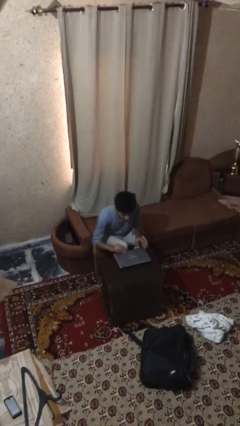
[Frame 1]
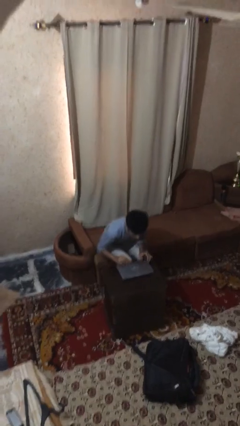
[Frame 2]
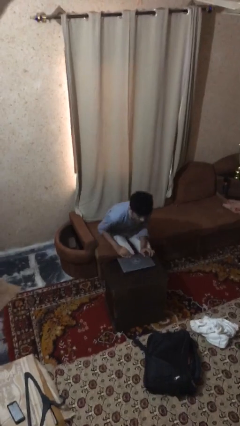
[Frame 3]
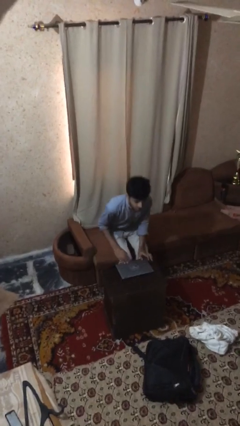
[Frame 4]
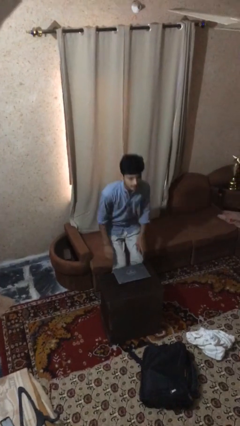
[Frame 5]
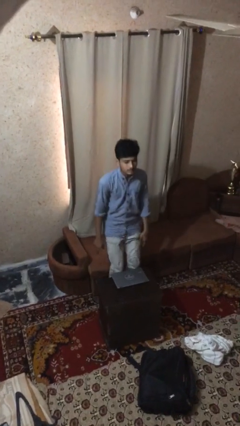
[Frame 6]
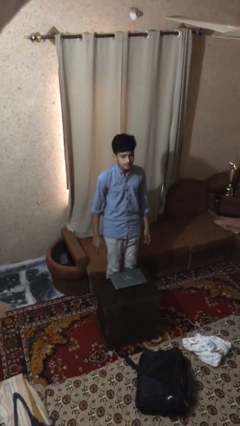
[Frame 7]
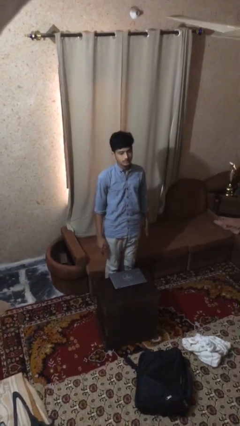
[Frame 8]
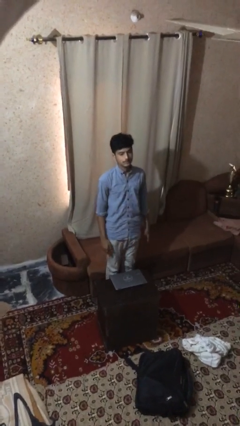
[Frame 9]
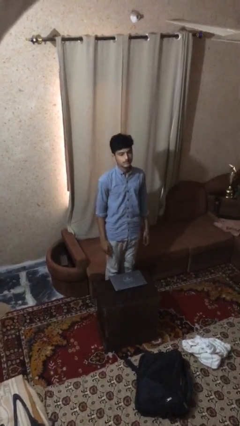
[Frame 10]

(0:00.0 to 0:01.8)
person stands up

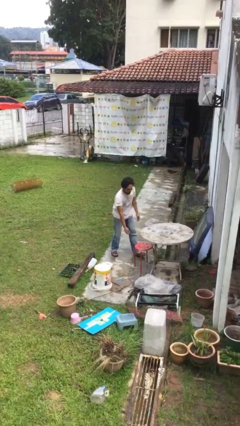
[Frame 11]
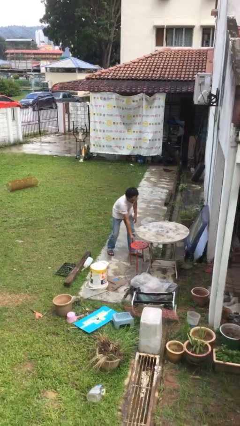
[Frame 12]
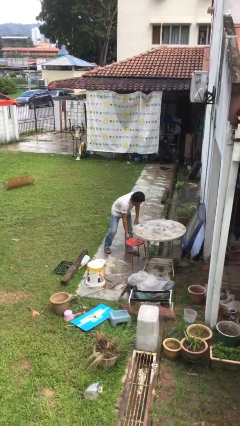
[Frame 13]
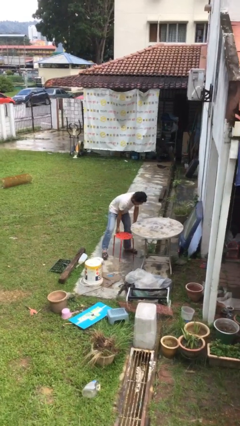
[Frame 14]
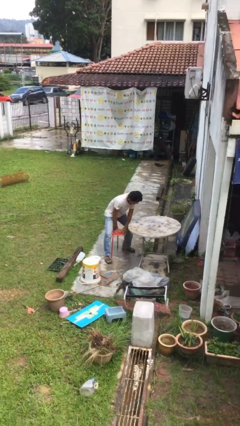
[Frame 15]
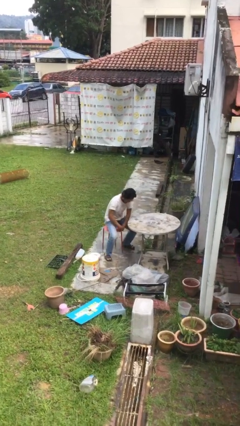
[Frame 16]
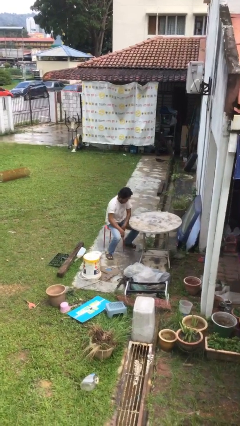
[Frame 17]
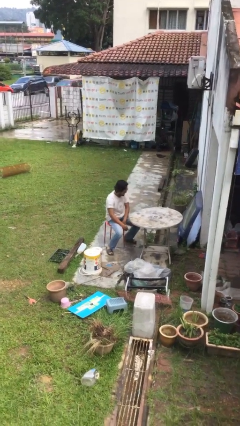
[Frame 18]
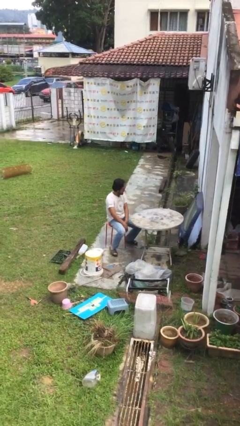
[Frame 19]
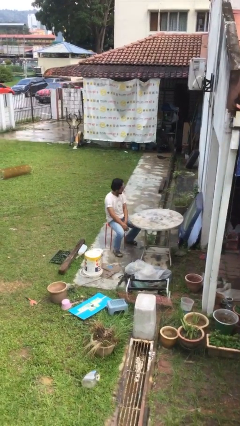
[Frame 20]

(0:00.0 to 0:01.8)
person sits down

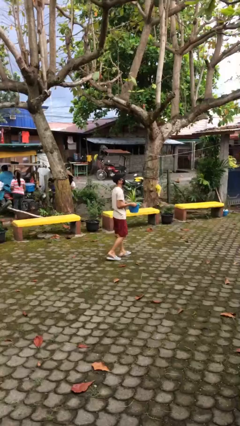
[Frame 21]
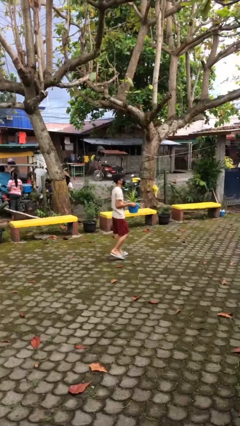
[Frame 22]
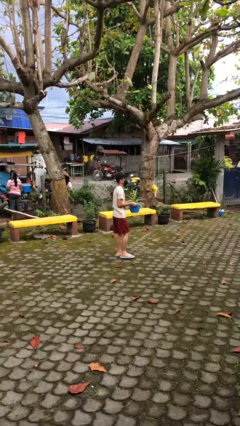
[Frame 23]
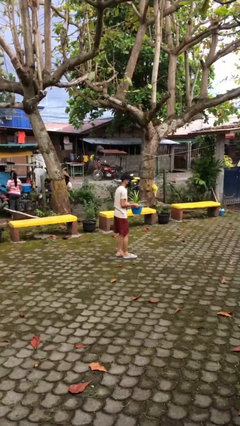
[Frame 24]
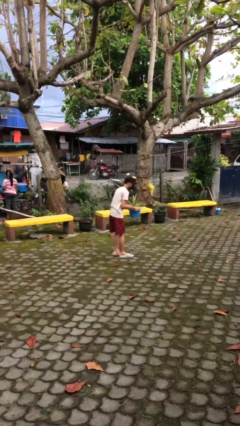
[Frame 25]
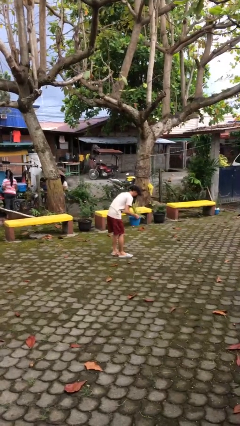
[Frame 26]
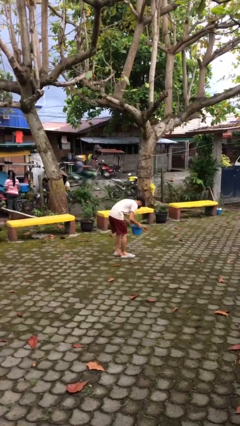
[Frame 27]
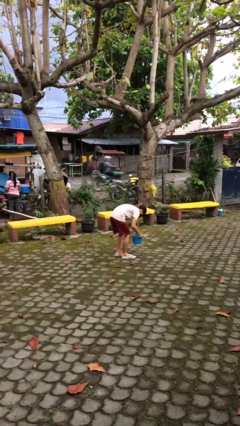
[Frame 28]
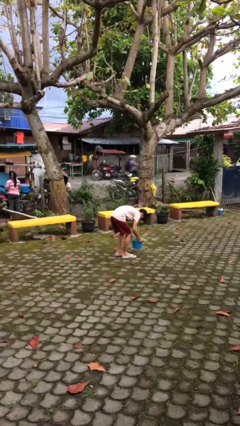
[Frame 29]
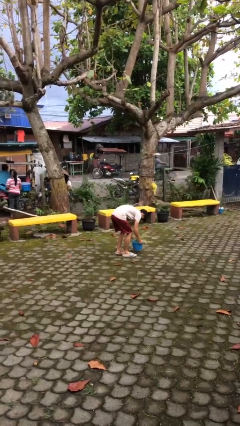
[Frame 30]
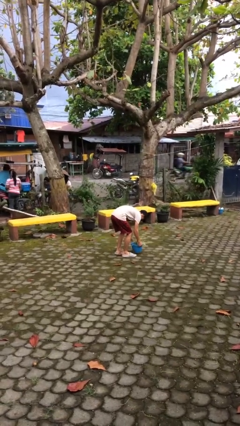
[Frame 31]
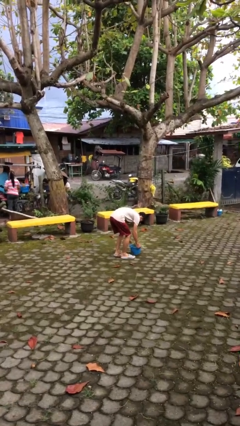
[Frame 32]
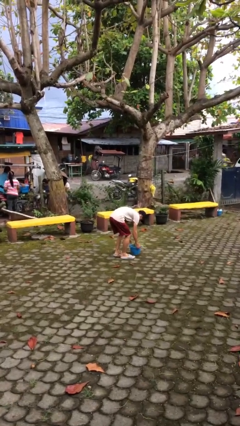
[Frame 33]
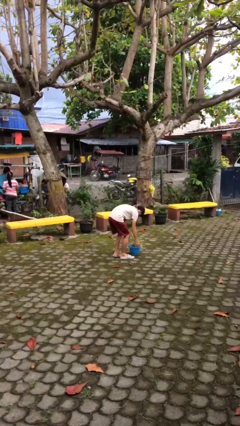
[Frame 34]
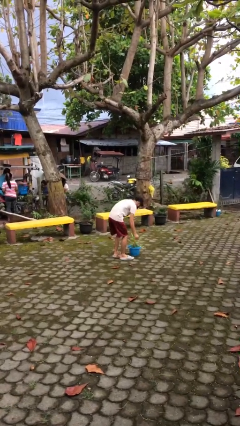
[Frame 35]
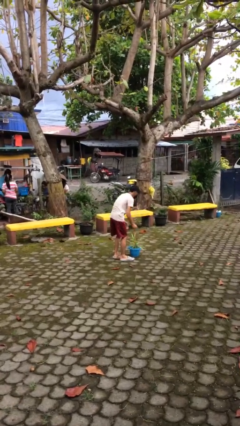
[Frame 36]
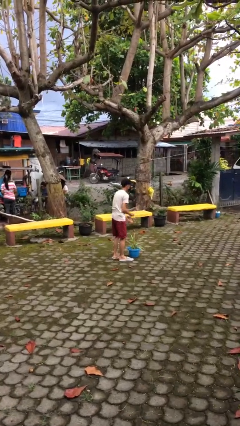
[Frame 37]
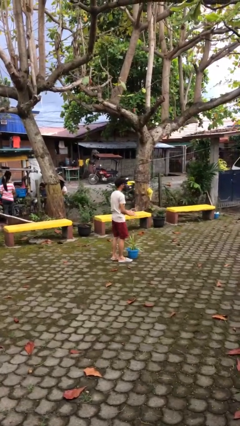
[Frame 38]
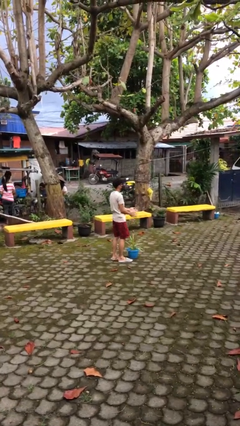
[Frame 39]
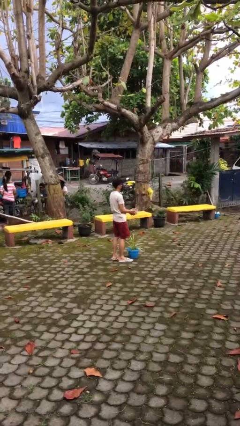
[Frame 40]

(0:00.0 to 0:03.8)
person puts down object on floor

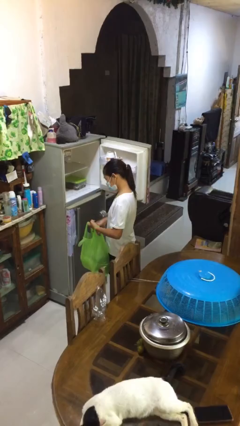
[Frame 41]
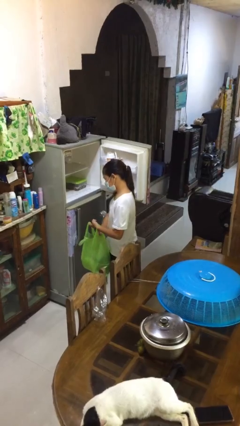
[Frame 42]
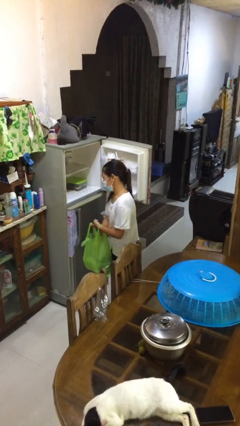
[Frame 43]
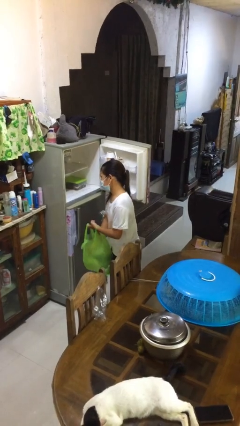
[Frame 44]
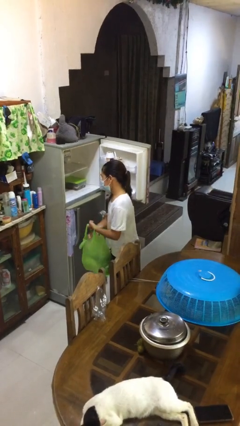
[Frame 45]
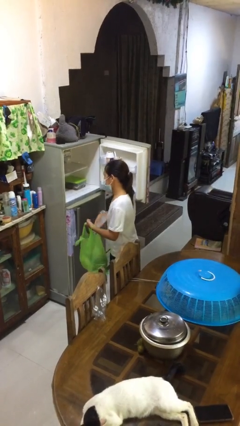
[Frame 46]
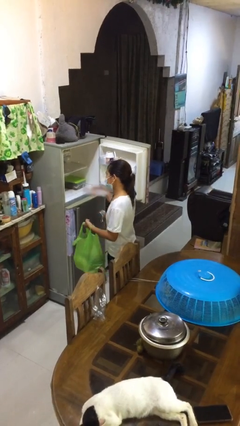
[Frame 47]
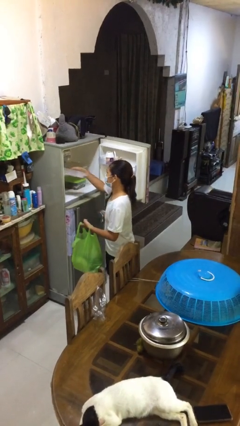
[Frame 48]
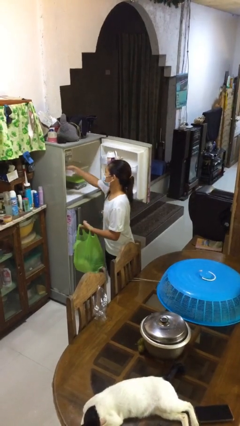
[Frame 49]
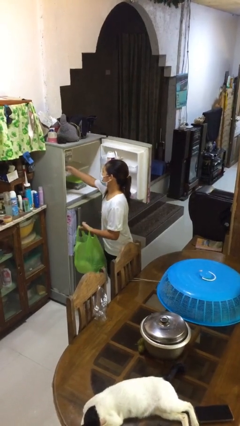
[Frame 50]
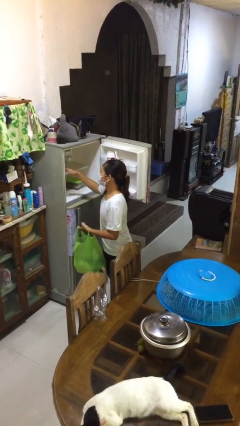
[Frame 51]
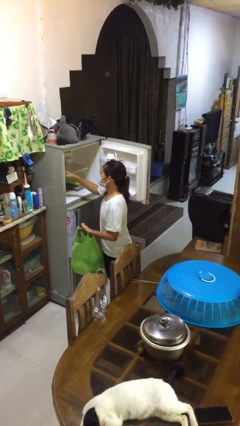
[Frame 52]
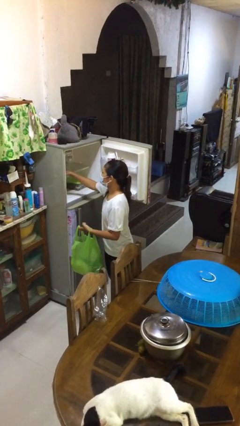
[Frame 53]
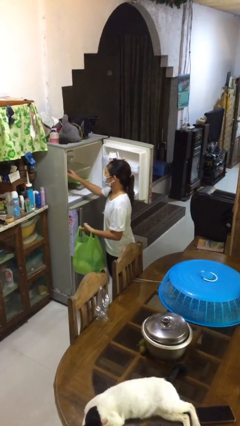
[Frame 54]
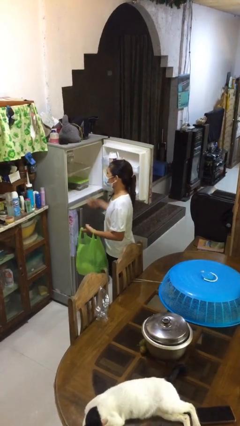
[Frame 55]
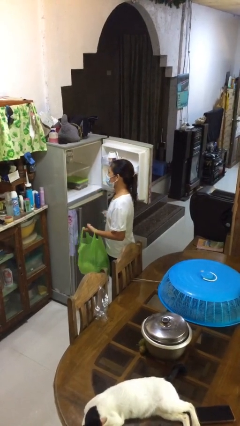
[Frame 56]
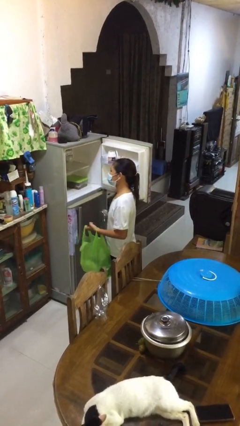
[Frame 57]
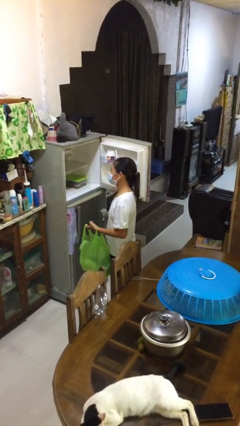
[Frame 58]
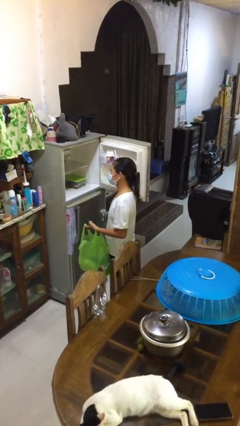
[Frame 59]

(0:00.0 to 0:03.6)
person loads groceries into refrigerator

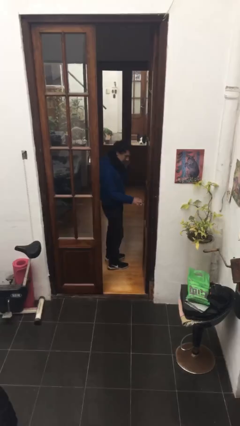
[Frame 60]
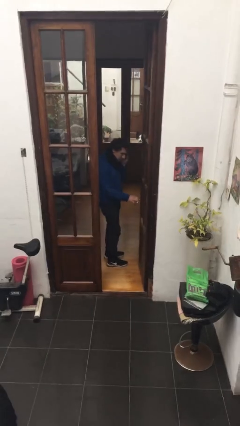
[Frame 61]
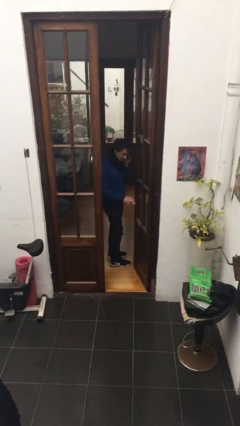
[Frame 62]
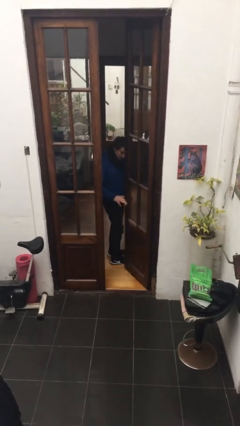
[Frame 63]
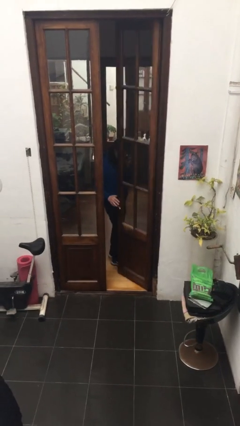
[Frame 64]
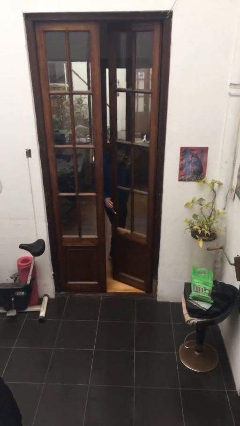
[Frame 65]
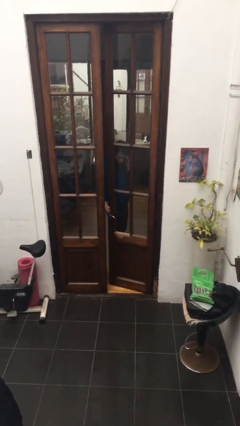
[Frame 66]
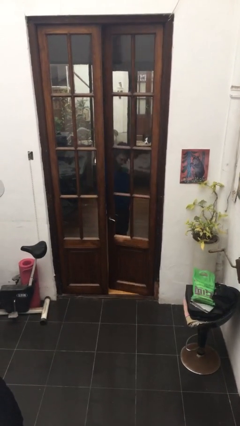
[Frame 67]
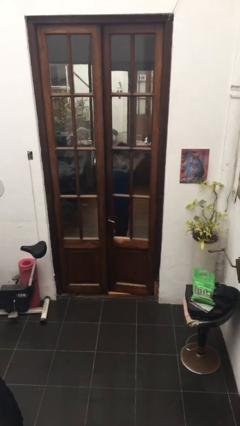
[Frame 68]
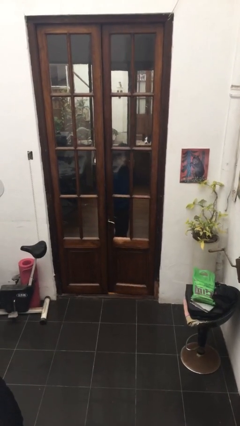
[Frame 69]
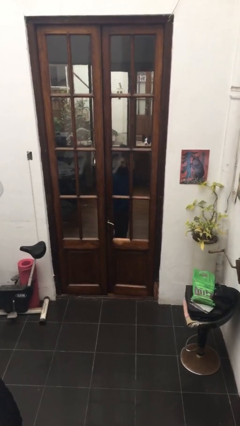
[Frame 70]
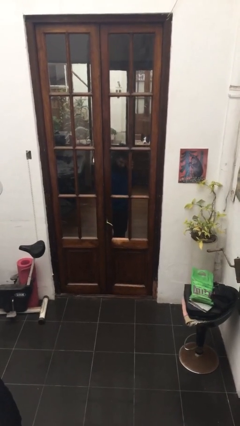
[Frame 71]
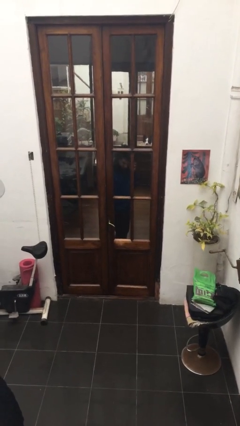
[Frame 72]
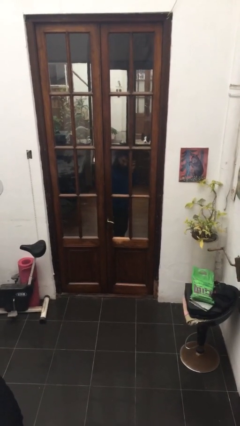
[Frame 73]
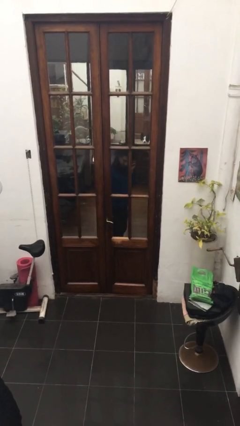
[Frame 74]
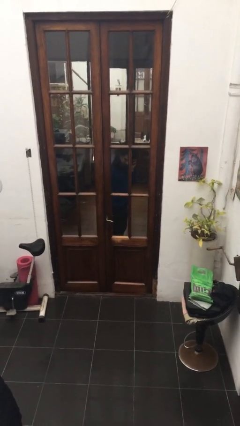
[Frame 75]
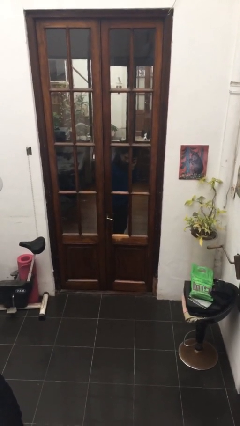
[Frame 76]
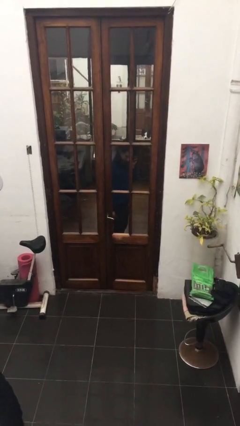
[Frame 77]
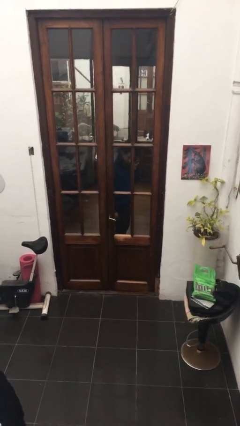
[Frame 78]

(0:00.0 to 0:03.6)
person closes facility door

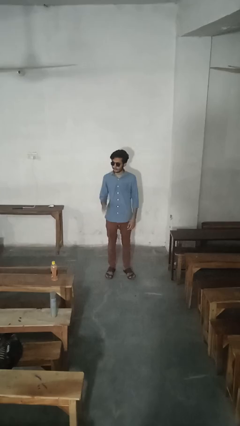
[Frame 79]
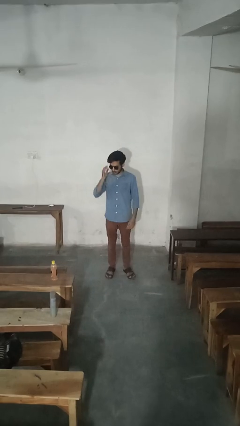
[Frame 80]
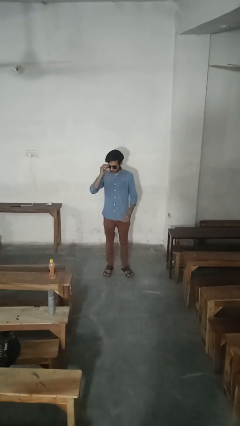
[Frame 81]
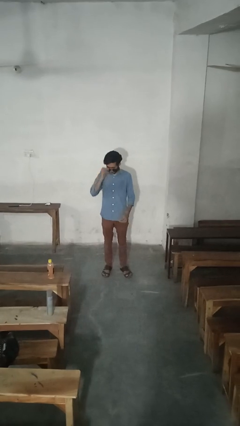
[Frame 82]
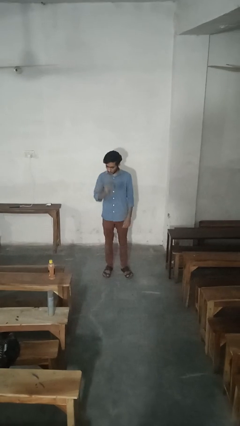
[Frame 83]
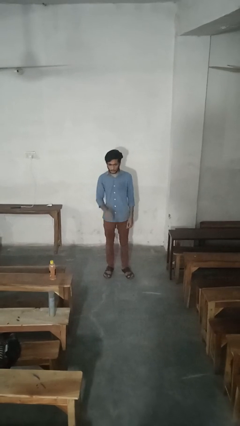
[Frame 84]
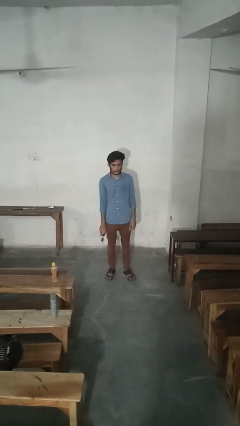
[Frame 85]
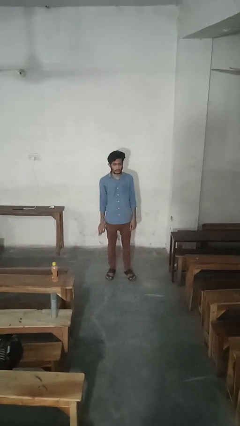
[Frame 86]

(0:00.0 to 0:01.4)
person takes off sunglasses

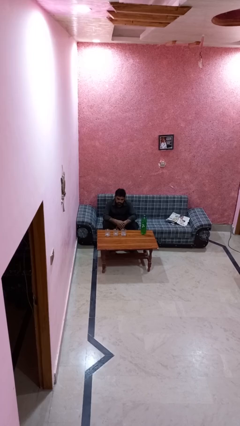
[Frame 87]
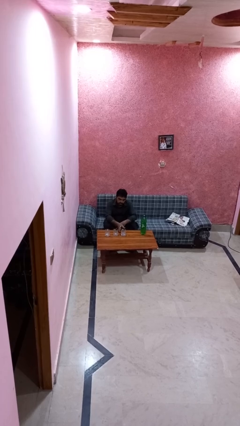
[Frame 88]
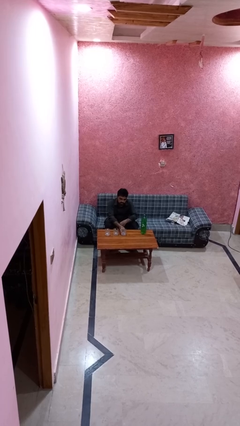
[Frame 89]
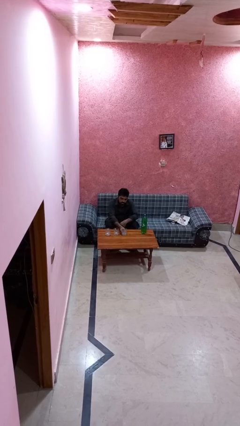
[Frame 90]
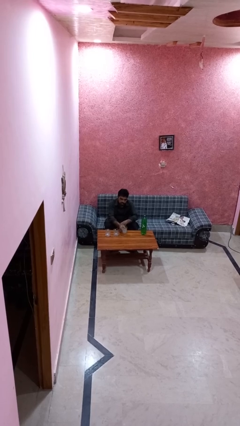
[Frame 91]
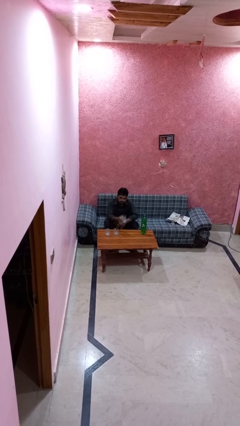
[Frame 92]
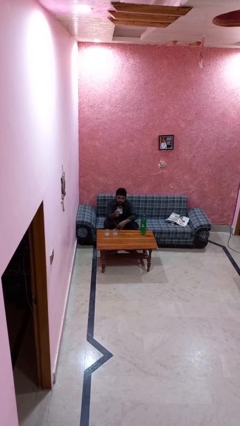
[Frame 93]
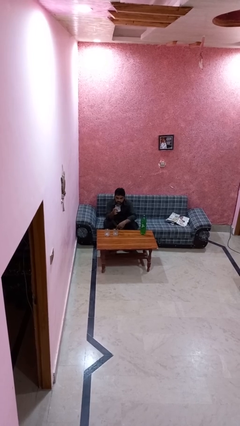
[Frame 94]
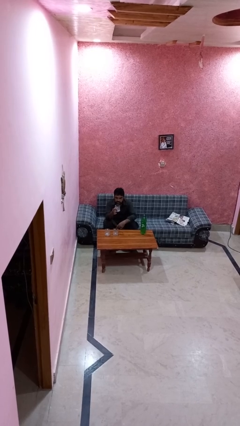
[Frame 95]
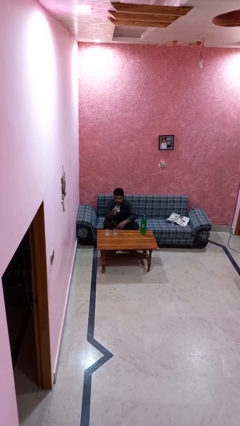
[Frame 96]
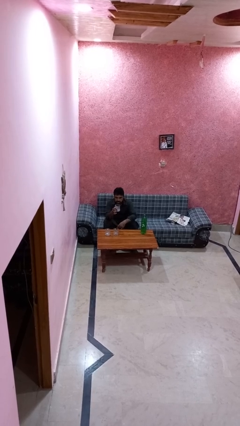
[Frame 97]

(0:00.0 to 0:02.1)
person picks up object from table
